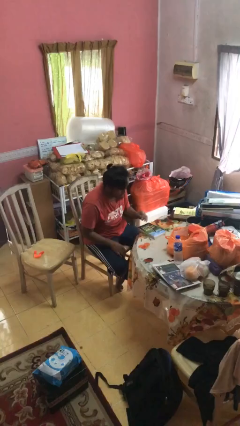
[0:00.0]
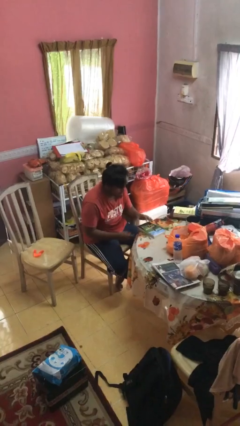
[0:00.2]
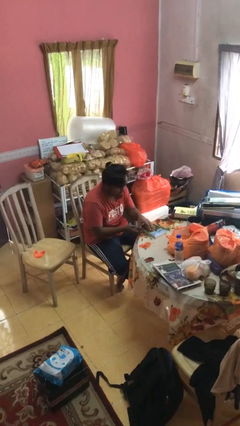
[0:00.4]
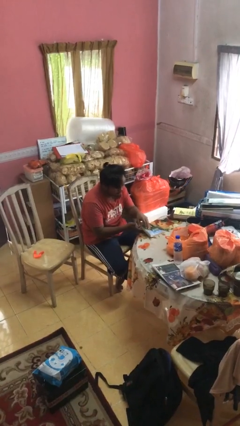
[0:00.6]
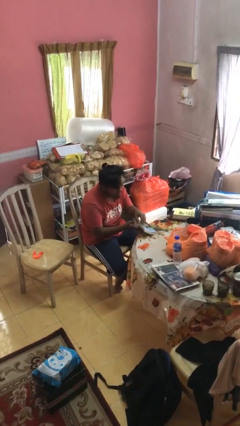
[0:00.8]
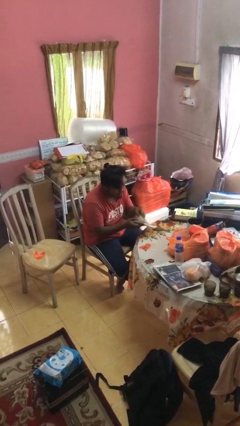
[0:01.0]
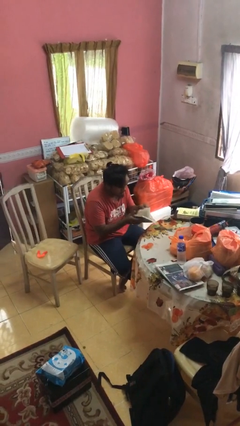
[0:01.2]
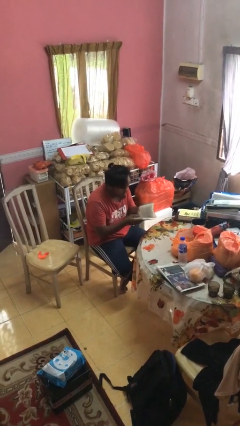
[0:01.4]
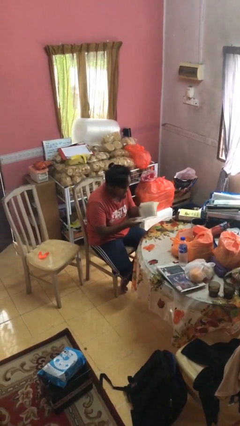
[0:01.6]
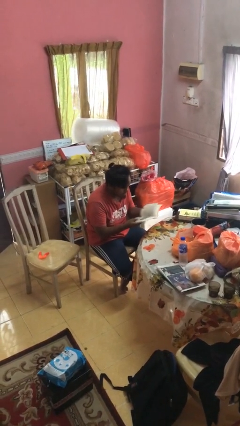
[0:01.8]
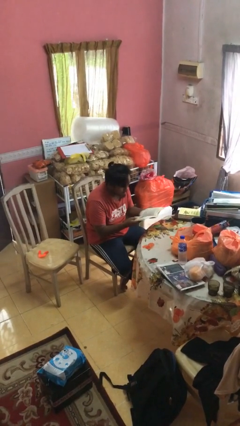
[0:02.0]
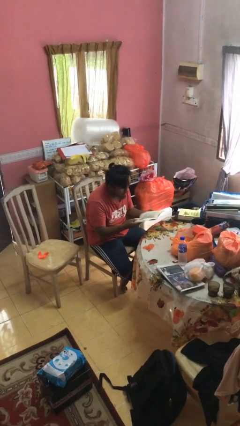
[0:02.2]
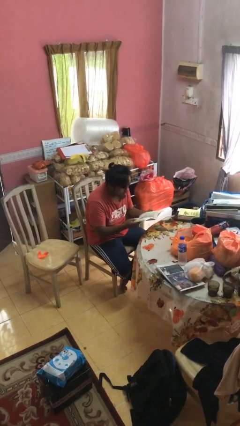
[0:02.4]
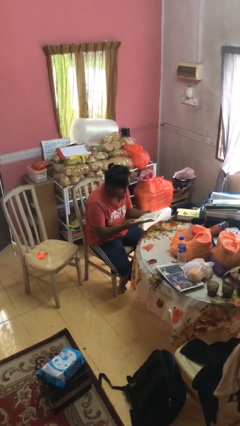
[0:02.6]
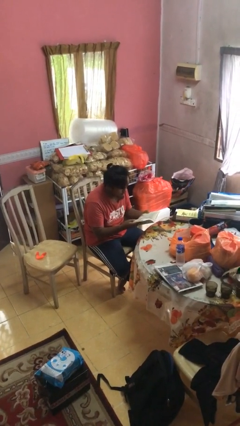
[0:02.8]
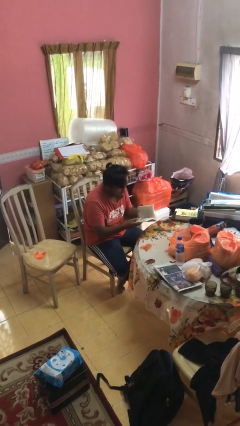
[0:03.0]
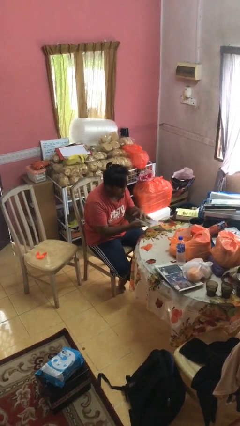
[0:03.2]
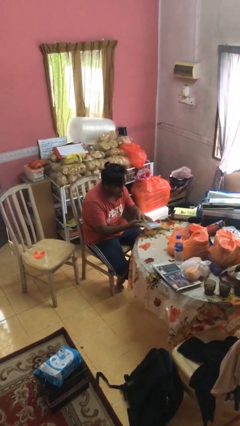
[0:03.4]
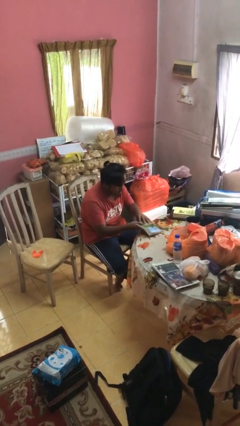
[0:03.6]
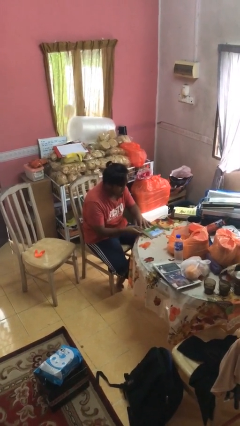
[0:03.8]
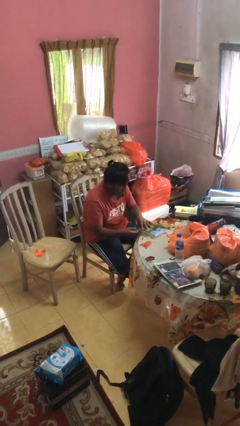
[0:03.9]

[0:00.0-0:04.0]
person reads book

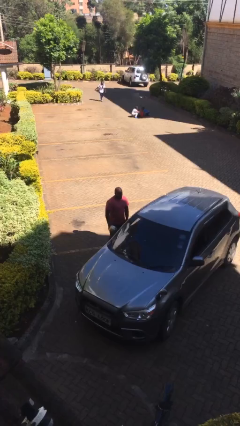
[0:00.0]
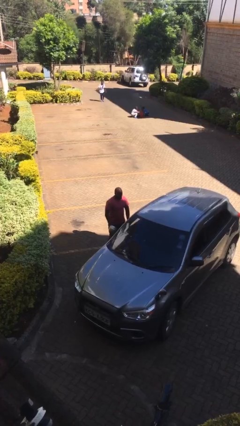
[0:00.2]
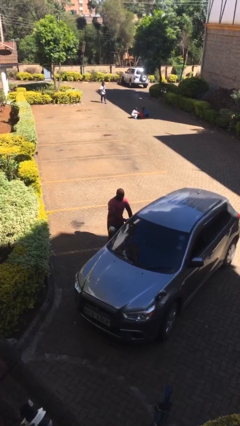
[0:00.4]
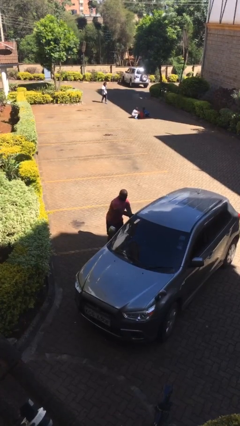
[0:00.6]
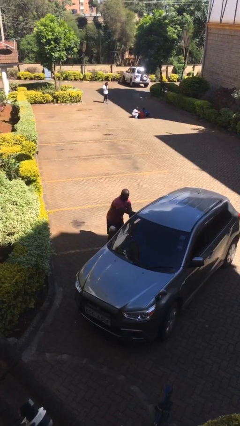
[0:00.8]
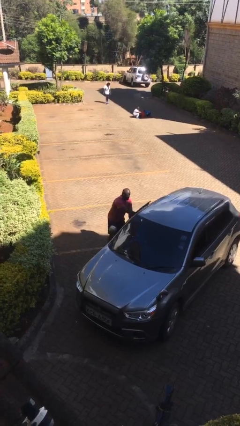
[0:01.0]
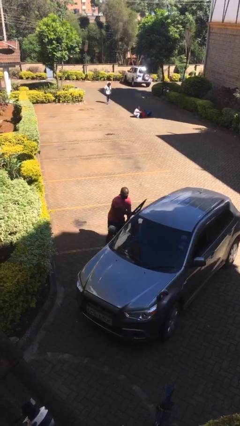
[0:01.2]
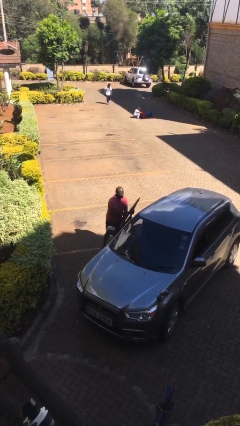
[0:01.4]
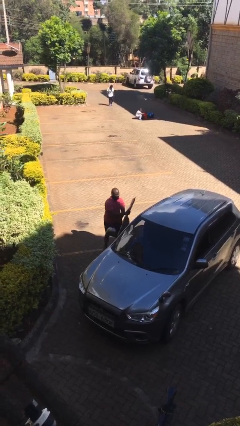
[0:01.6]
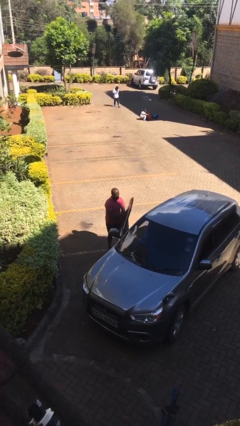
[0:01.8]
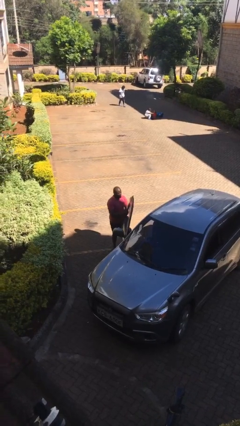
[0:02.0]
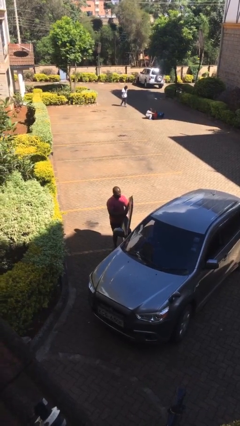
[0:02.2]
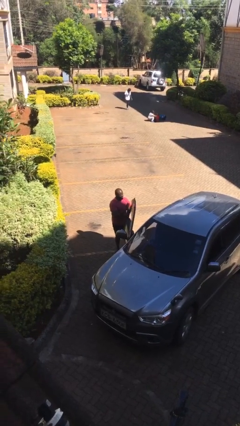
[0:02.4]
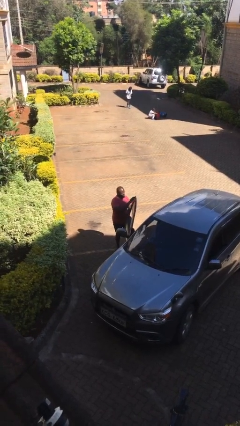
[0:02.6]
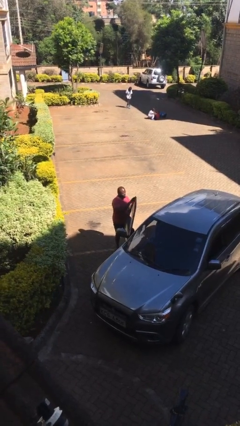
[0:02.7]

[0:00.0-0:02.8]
person opens car door

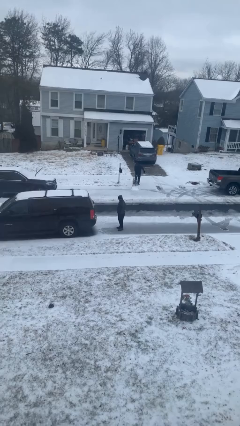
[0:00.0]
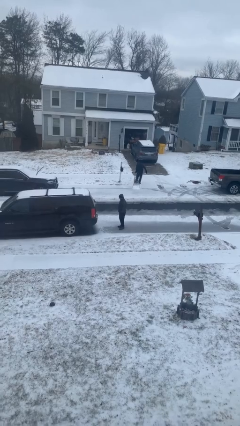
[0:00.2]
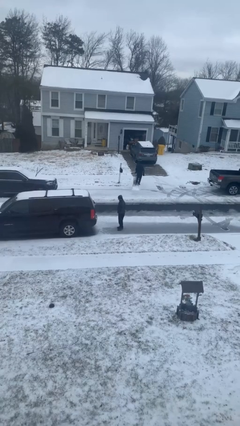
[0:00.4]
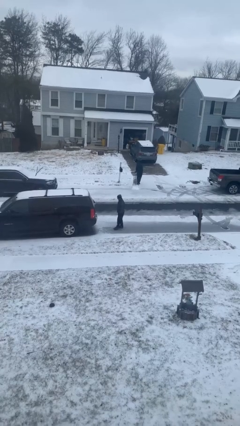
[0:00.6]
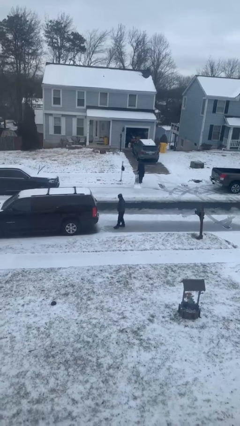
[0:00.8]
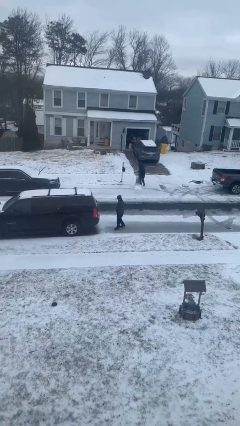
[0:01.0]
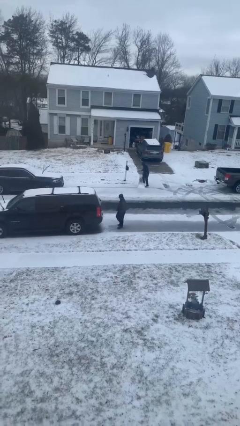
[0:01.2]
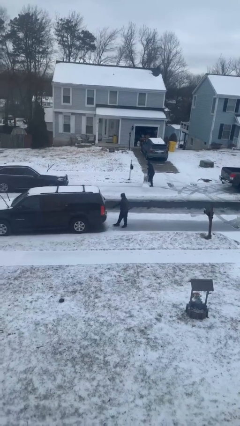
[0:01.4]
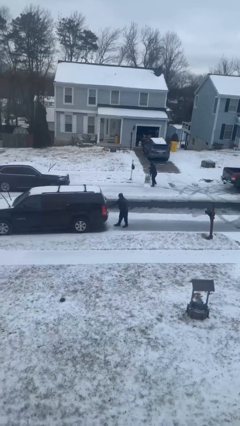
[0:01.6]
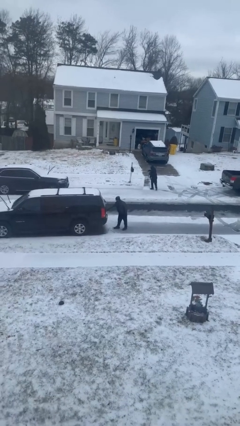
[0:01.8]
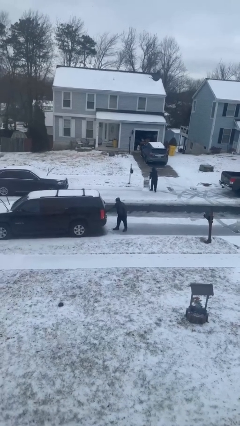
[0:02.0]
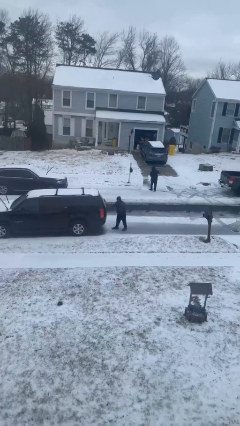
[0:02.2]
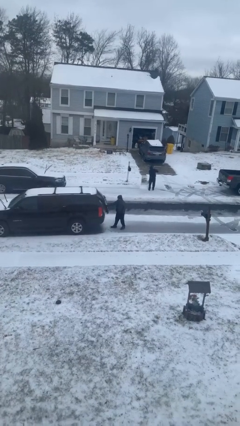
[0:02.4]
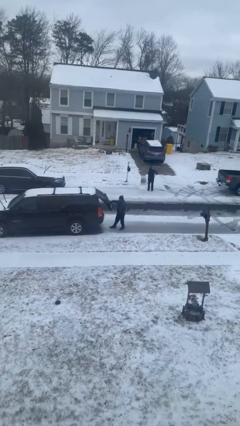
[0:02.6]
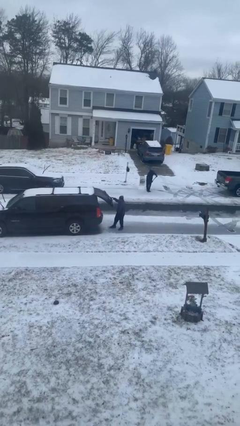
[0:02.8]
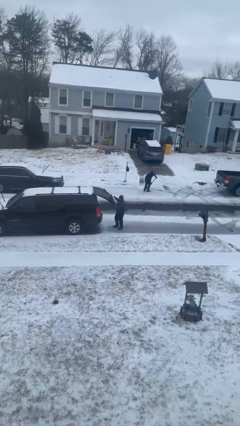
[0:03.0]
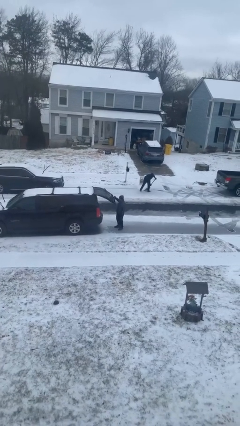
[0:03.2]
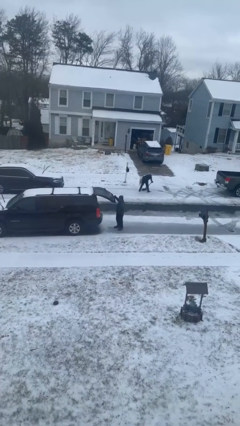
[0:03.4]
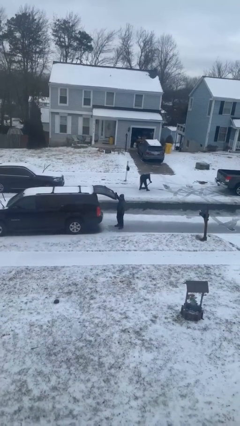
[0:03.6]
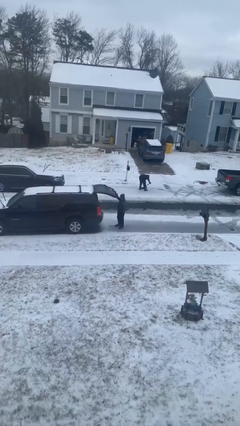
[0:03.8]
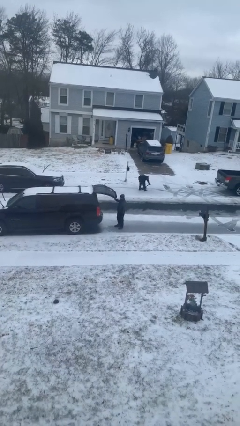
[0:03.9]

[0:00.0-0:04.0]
person opens car trunk

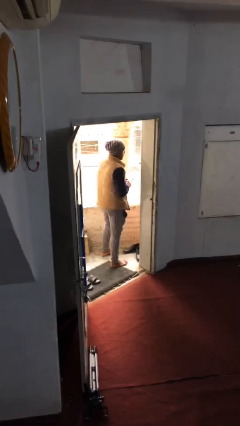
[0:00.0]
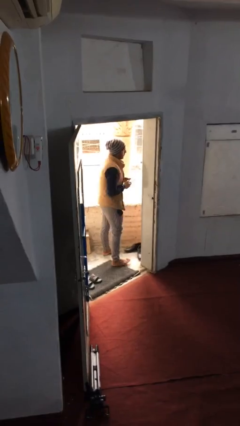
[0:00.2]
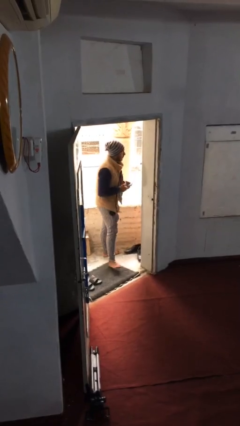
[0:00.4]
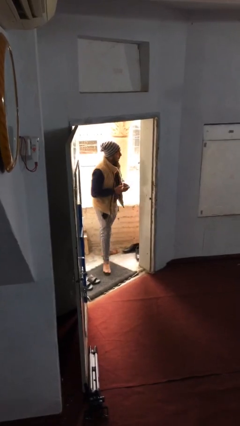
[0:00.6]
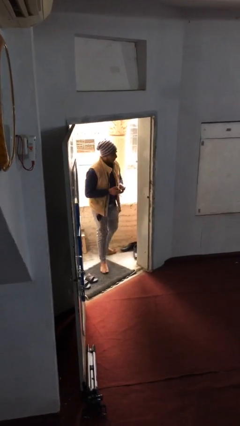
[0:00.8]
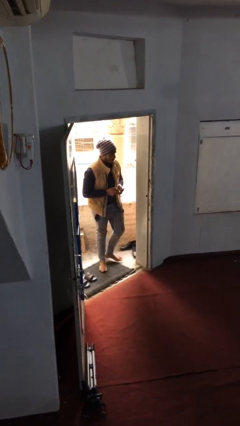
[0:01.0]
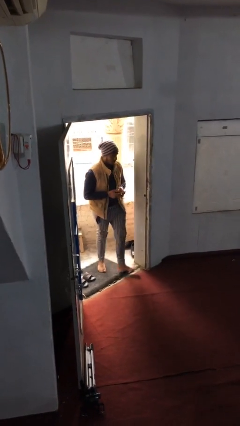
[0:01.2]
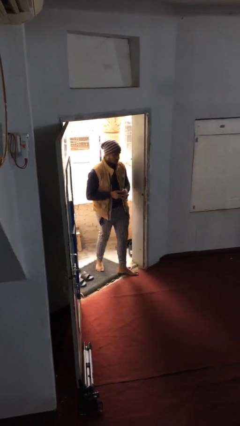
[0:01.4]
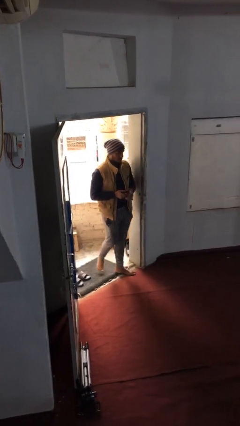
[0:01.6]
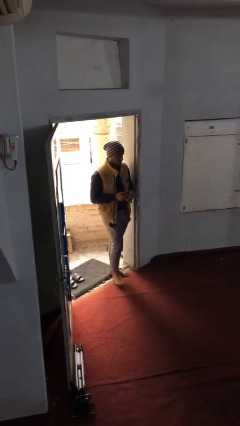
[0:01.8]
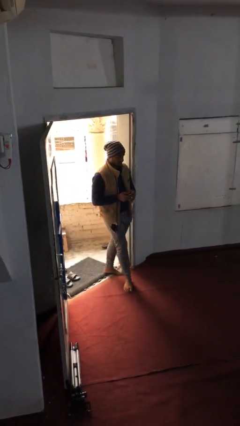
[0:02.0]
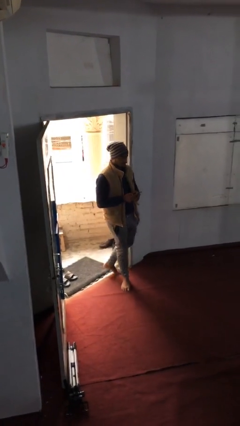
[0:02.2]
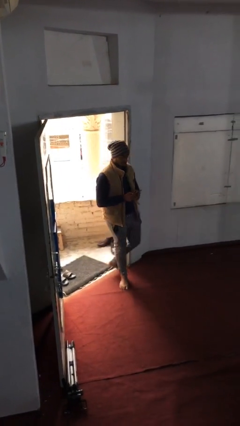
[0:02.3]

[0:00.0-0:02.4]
person enters scene through structure

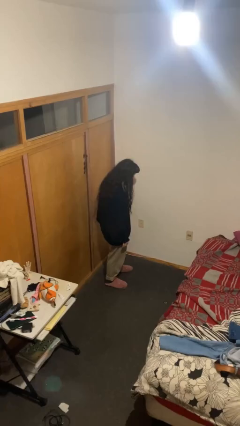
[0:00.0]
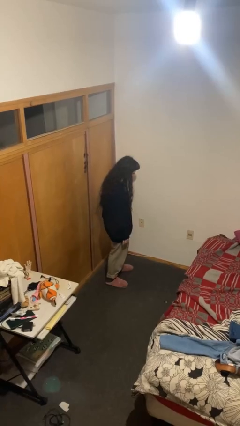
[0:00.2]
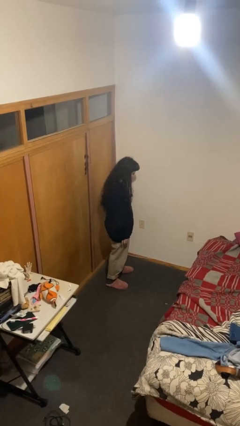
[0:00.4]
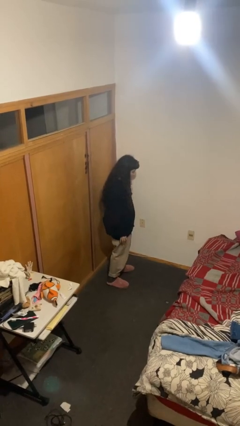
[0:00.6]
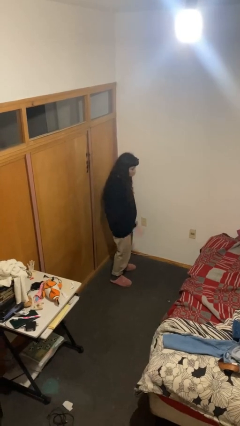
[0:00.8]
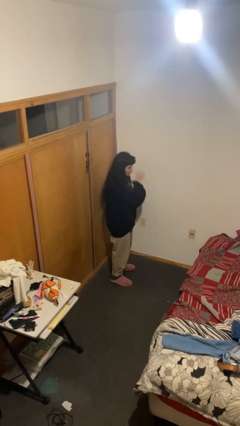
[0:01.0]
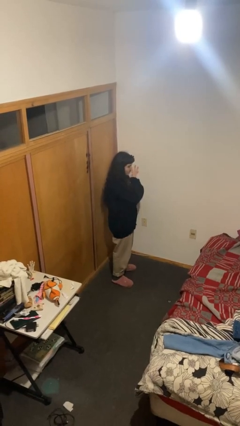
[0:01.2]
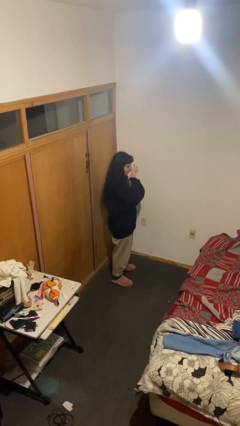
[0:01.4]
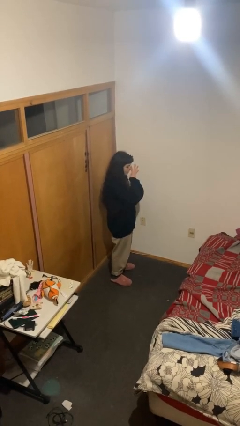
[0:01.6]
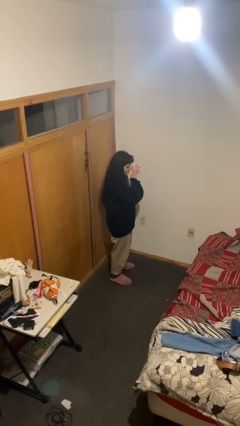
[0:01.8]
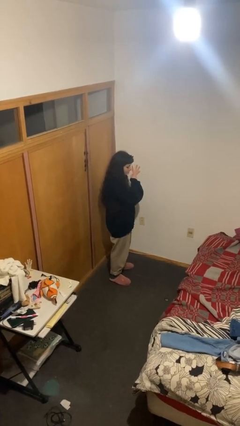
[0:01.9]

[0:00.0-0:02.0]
person gestures number four

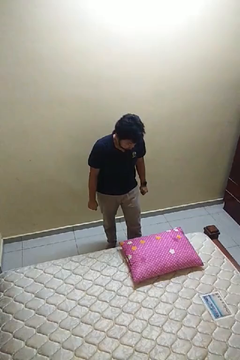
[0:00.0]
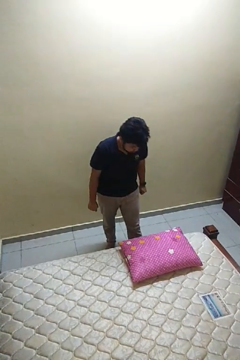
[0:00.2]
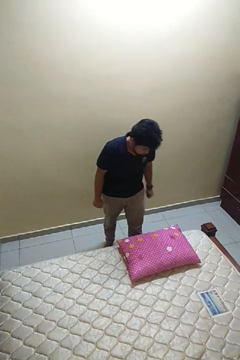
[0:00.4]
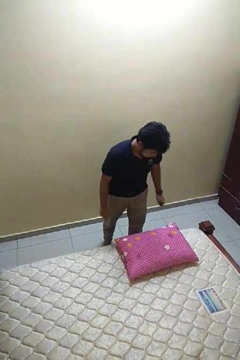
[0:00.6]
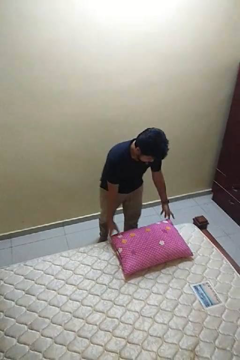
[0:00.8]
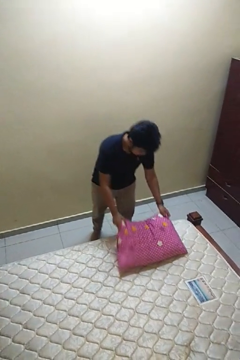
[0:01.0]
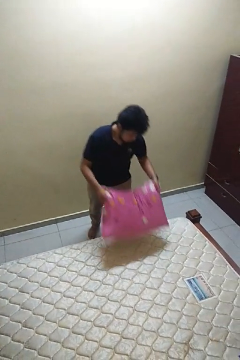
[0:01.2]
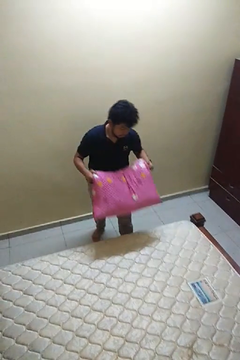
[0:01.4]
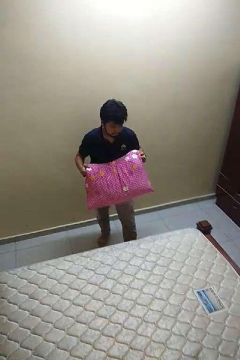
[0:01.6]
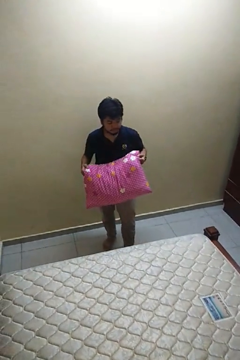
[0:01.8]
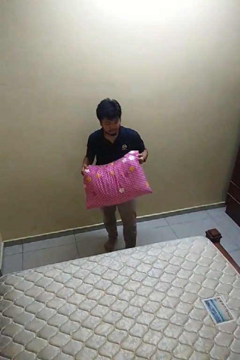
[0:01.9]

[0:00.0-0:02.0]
person picks up object from bed

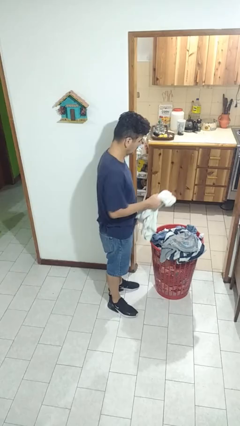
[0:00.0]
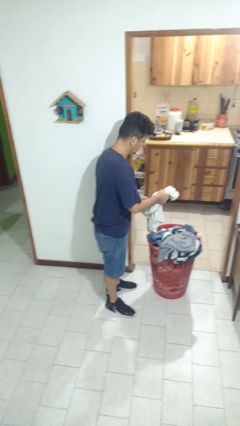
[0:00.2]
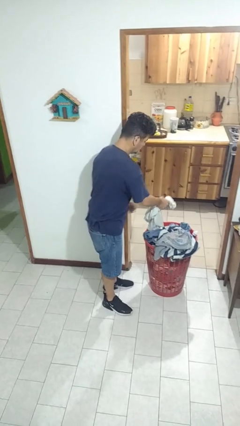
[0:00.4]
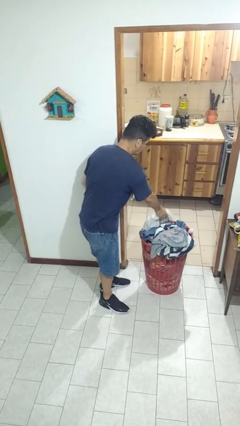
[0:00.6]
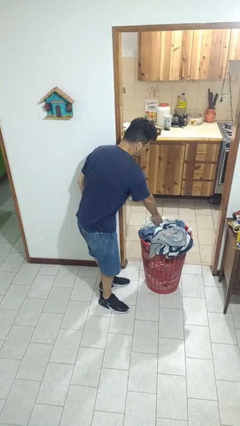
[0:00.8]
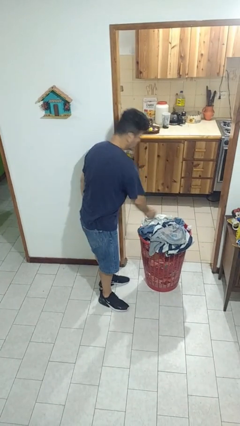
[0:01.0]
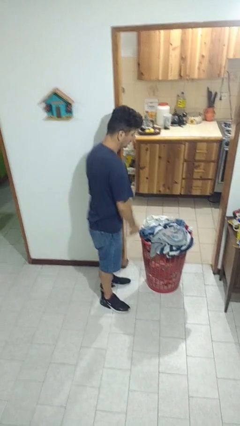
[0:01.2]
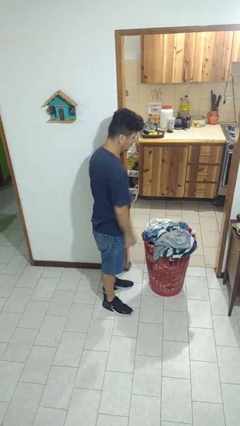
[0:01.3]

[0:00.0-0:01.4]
person puts object into basket
